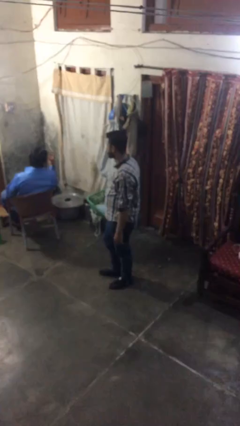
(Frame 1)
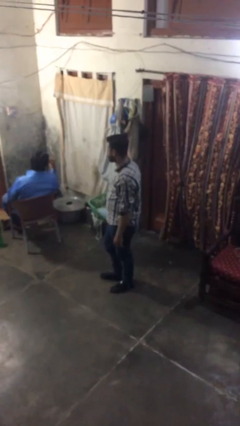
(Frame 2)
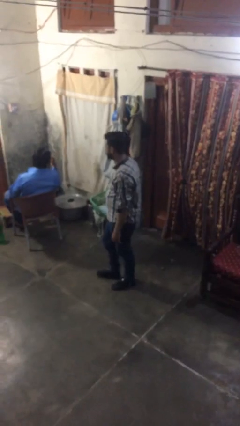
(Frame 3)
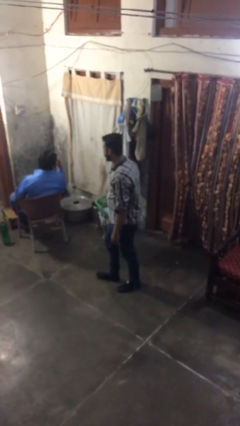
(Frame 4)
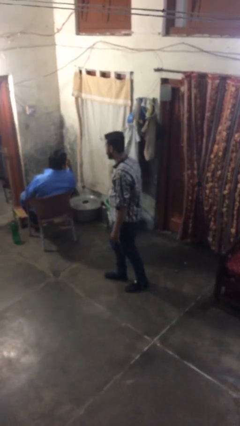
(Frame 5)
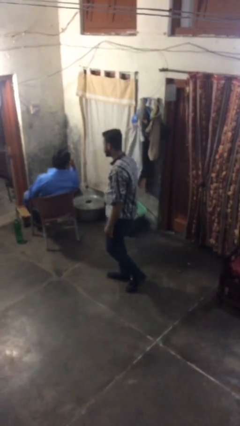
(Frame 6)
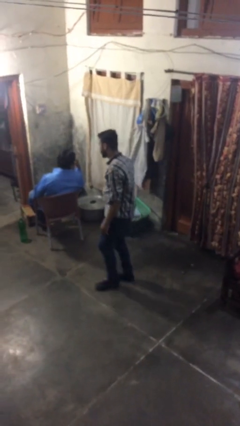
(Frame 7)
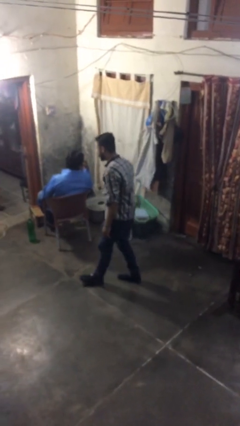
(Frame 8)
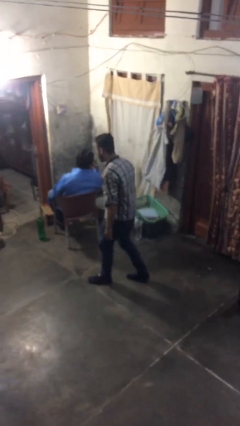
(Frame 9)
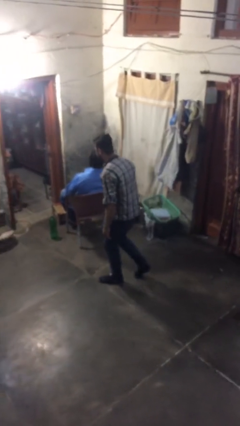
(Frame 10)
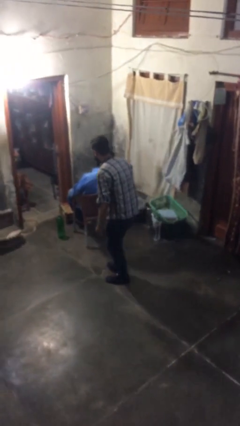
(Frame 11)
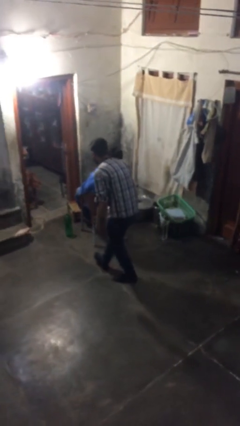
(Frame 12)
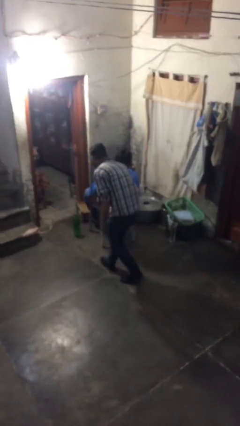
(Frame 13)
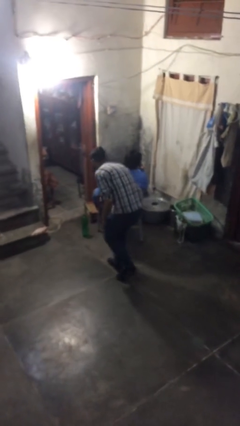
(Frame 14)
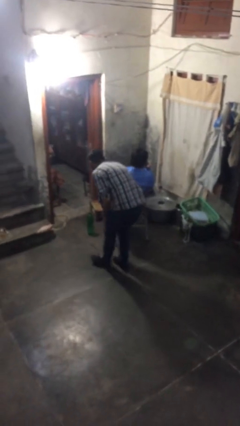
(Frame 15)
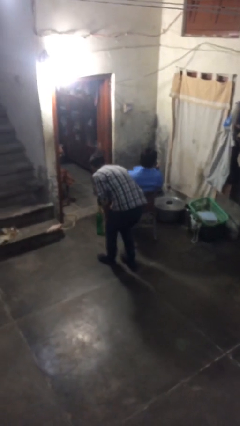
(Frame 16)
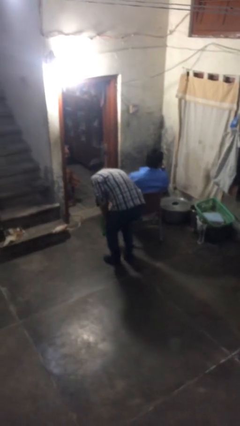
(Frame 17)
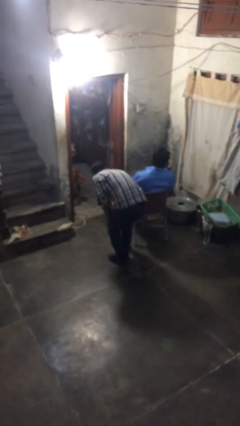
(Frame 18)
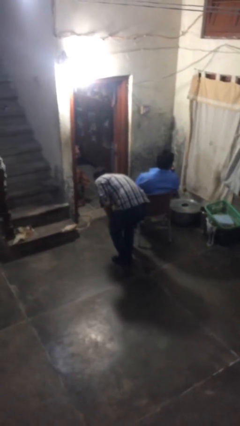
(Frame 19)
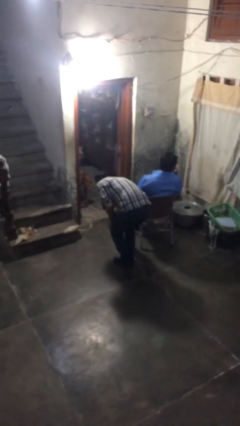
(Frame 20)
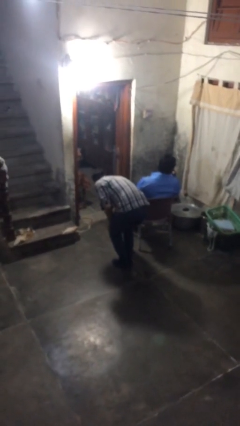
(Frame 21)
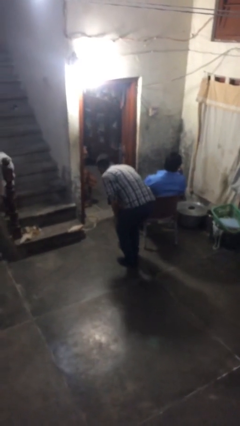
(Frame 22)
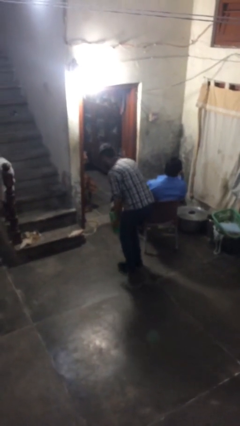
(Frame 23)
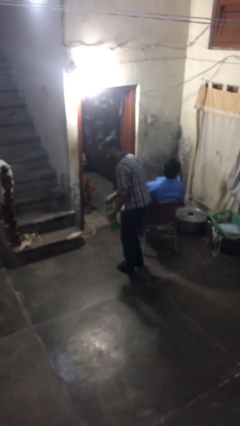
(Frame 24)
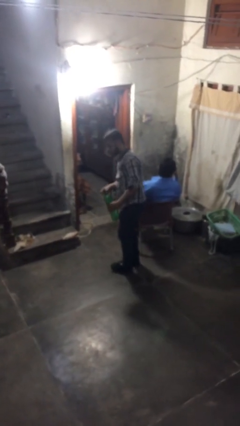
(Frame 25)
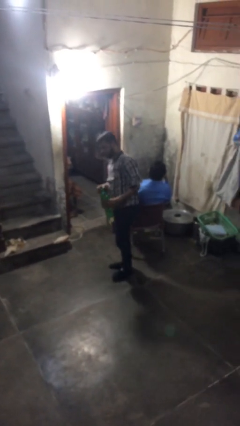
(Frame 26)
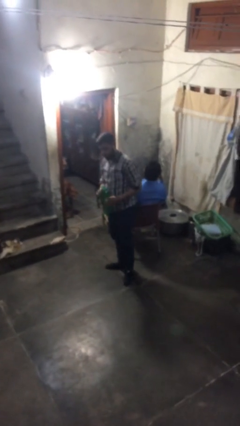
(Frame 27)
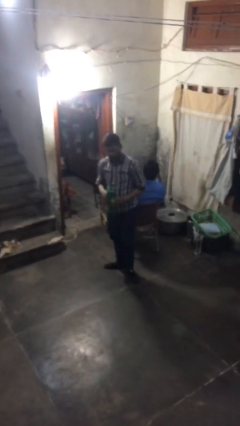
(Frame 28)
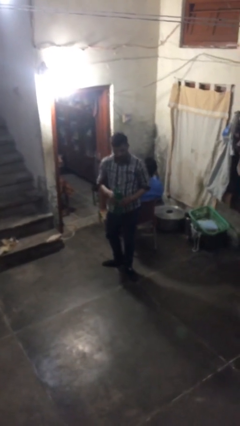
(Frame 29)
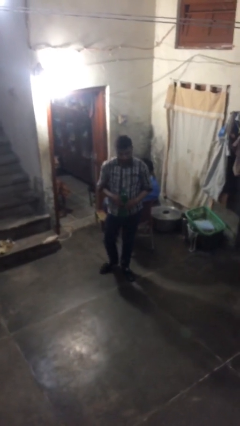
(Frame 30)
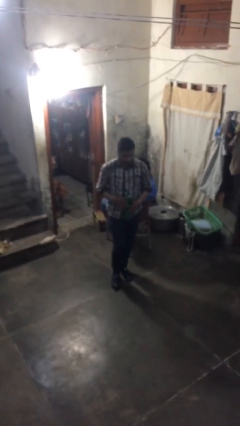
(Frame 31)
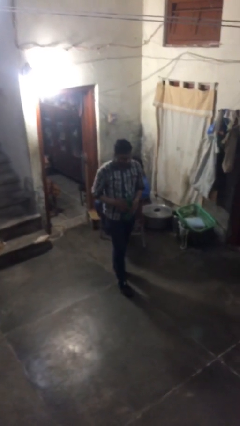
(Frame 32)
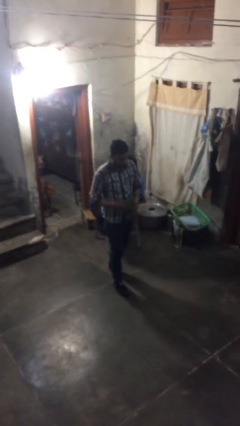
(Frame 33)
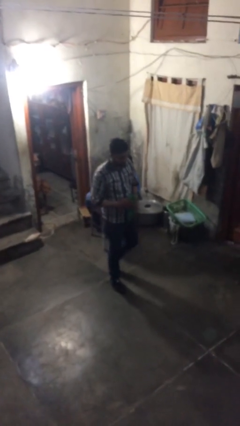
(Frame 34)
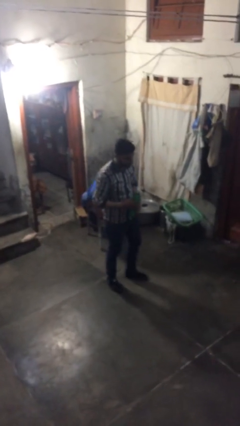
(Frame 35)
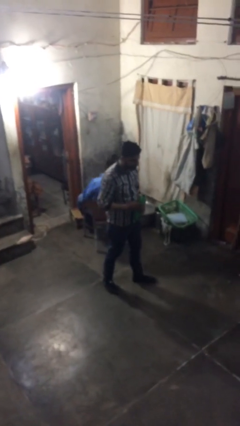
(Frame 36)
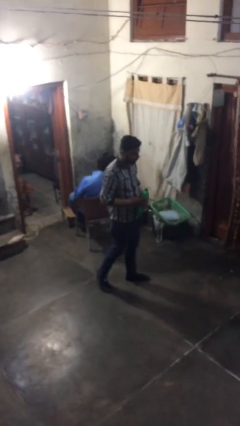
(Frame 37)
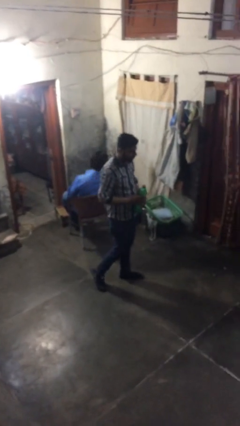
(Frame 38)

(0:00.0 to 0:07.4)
person steals object from person

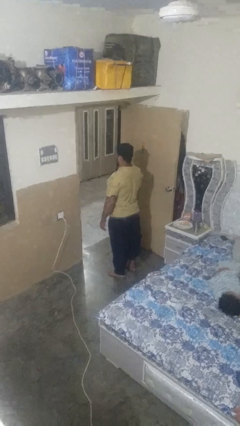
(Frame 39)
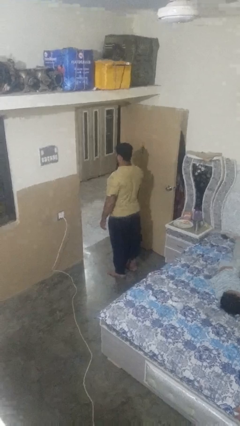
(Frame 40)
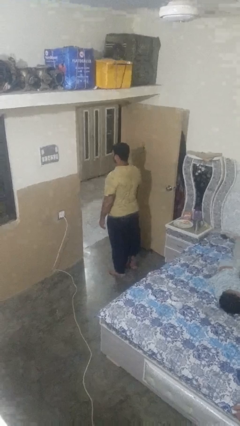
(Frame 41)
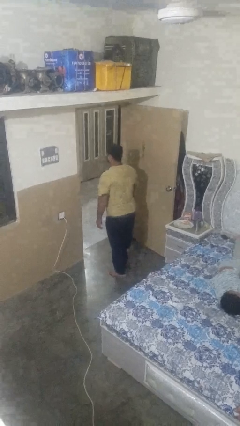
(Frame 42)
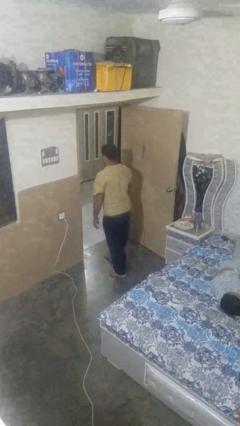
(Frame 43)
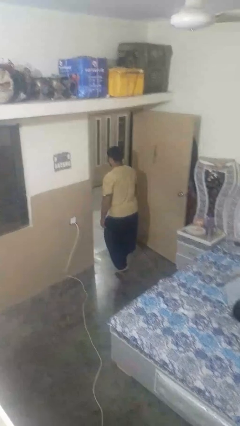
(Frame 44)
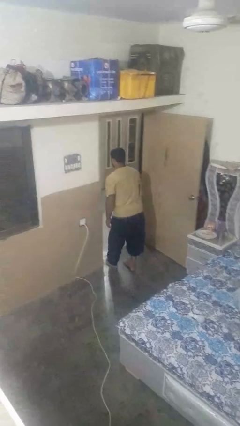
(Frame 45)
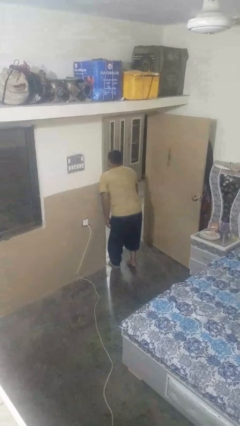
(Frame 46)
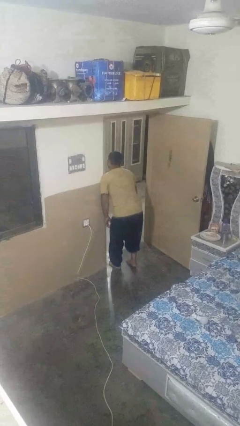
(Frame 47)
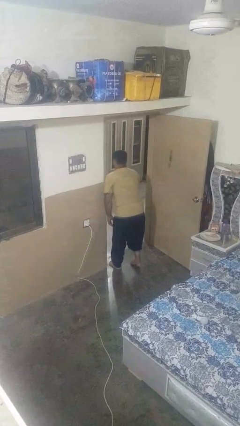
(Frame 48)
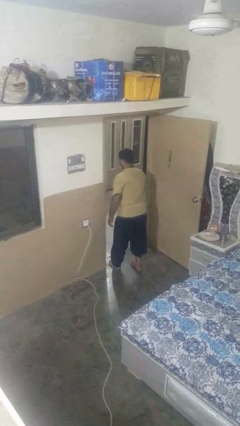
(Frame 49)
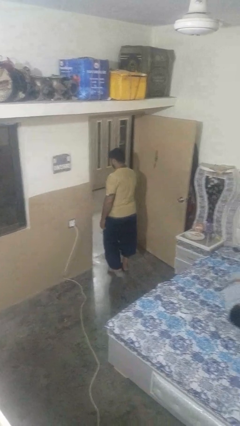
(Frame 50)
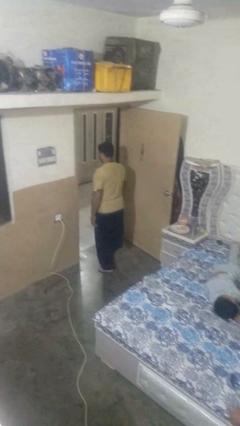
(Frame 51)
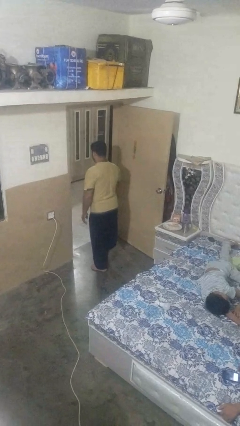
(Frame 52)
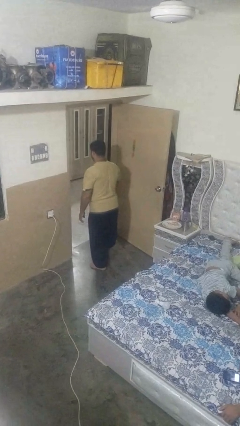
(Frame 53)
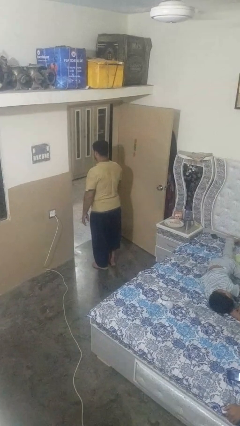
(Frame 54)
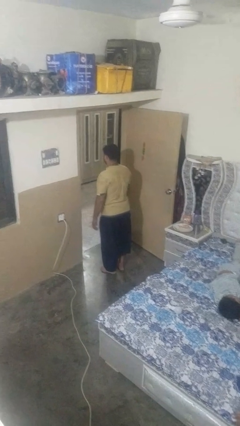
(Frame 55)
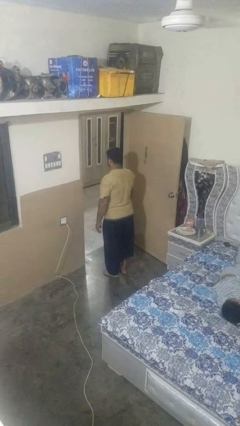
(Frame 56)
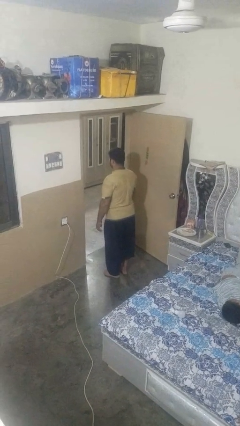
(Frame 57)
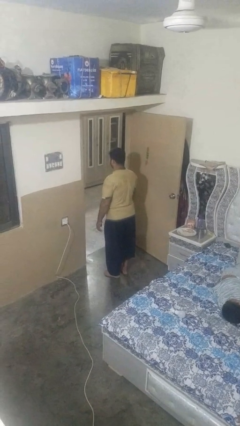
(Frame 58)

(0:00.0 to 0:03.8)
person bumps into wall

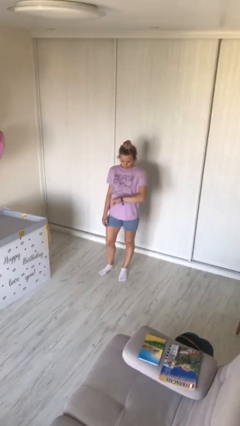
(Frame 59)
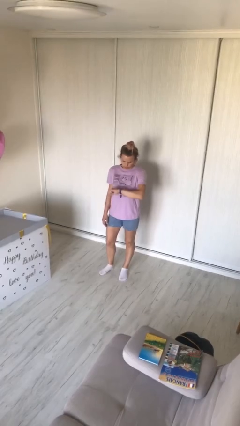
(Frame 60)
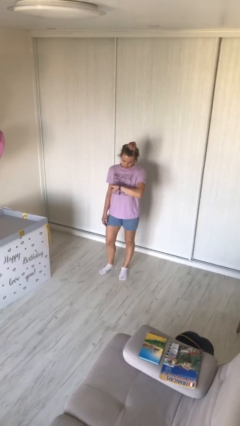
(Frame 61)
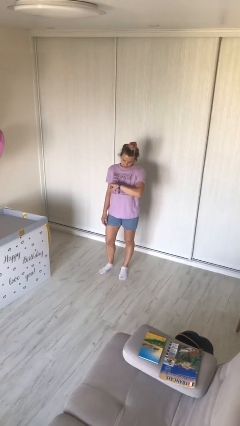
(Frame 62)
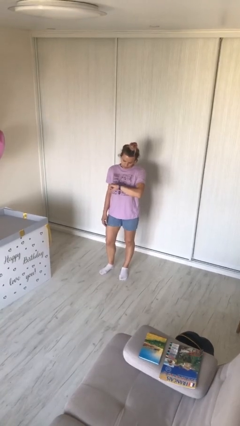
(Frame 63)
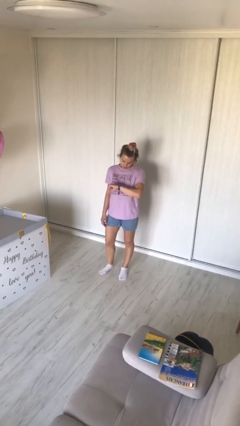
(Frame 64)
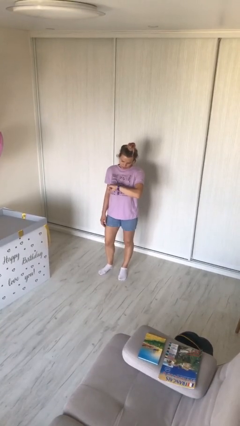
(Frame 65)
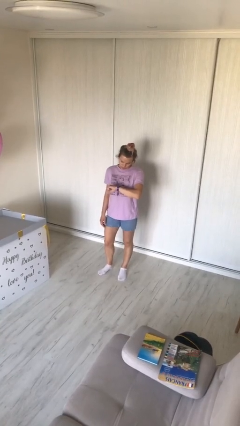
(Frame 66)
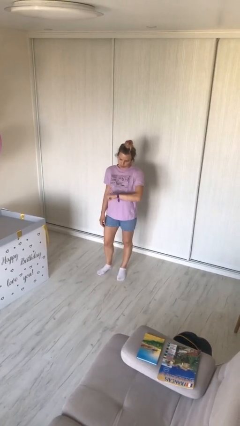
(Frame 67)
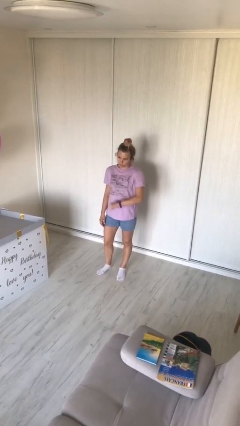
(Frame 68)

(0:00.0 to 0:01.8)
person looks at wristwatch

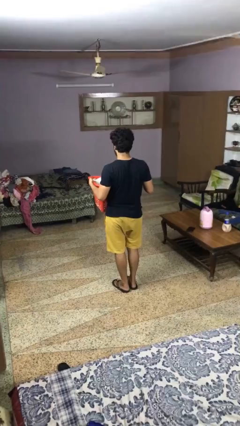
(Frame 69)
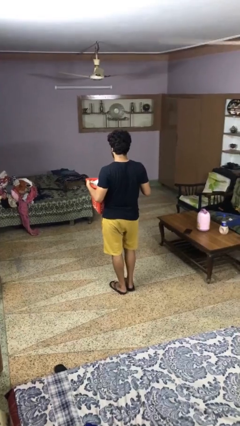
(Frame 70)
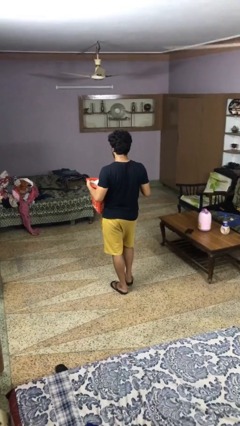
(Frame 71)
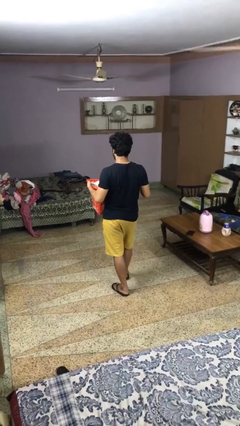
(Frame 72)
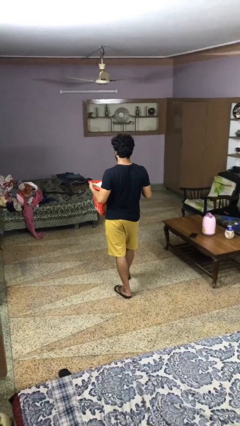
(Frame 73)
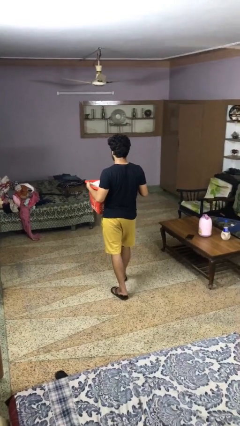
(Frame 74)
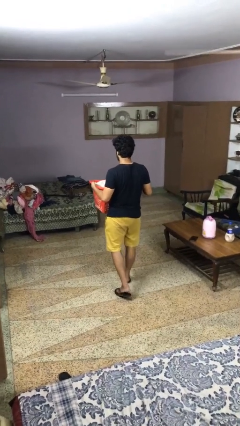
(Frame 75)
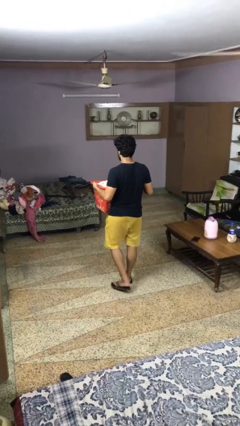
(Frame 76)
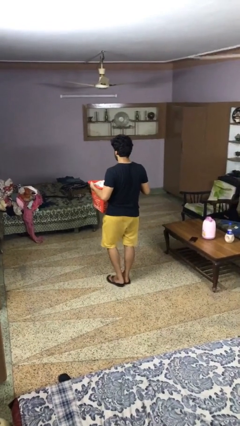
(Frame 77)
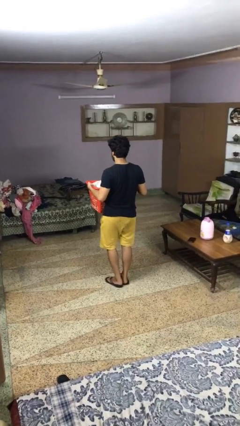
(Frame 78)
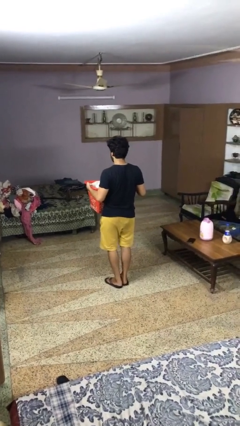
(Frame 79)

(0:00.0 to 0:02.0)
person carries laundry basket

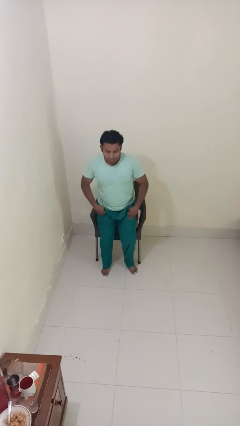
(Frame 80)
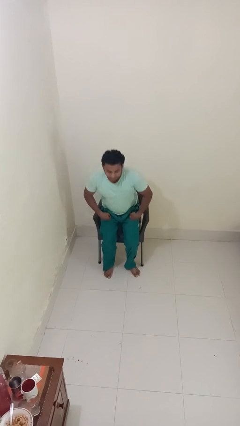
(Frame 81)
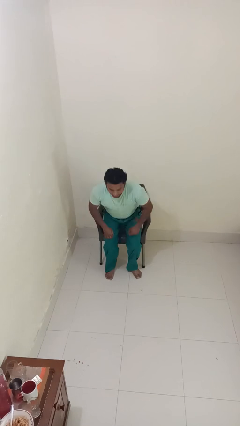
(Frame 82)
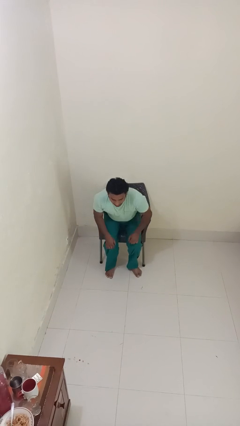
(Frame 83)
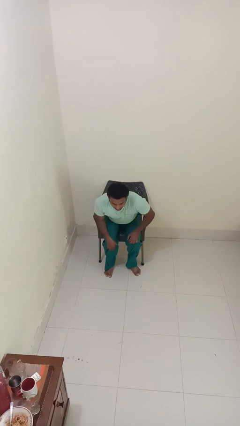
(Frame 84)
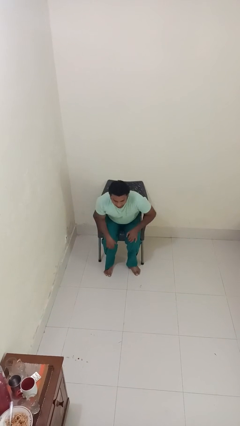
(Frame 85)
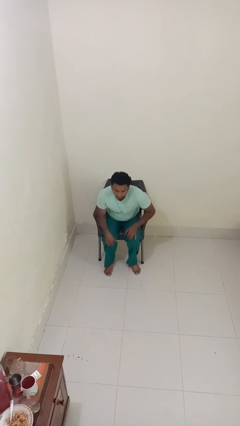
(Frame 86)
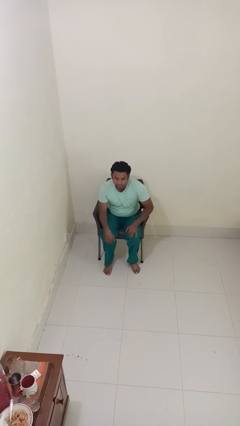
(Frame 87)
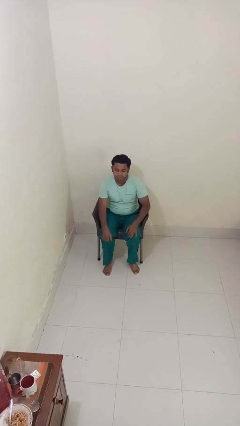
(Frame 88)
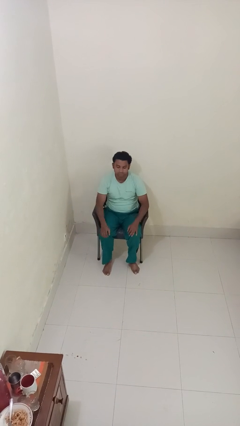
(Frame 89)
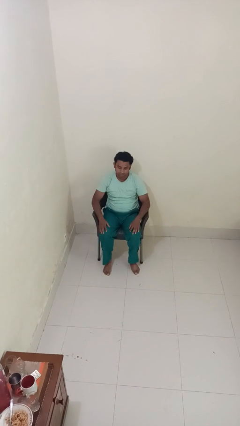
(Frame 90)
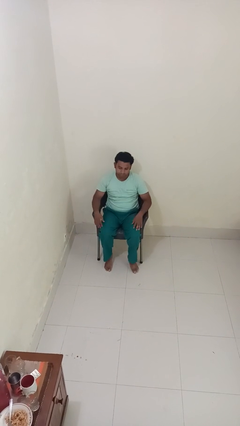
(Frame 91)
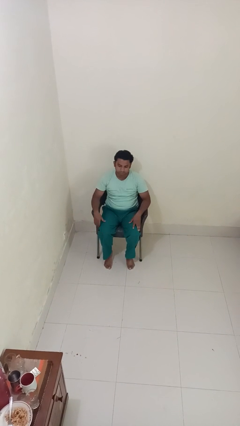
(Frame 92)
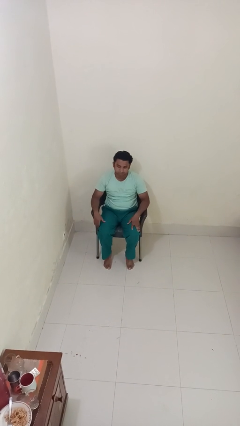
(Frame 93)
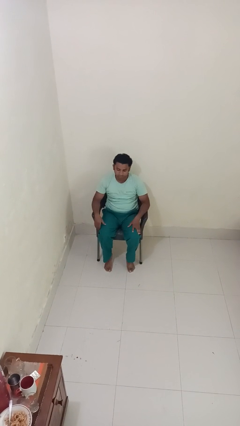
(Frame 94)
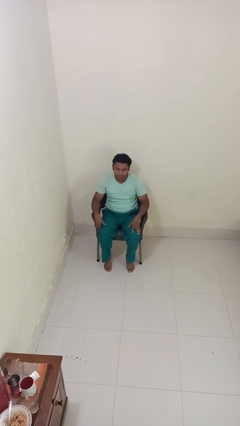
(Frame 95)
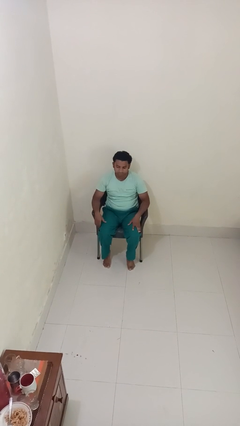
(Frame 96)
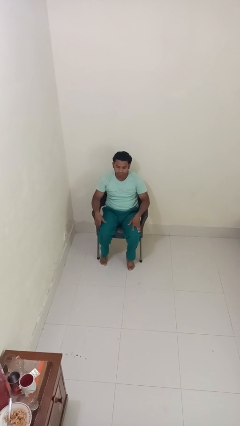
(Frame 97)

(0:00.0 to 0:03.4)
person sits down
